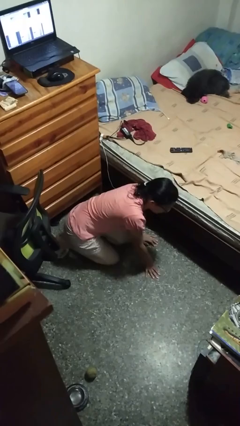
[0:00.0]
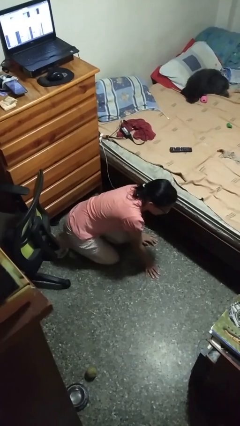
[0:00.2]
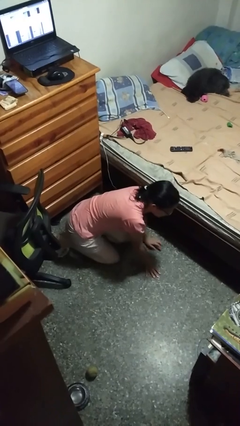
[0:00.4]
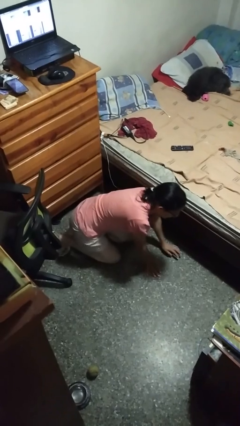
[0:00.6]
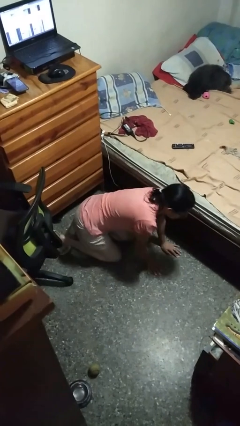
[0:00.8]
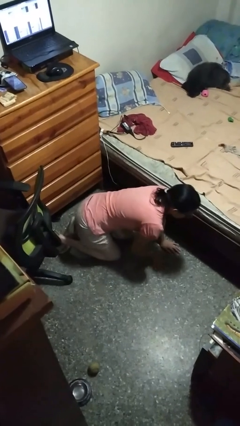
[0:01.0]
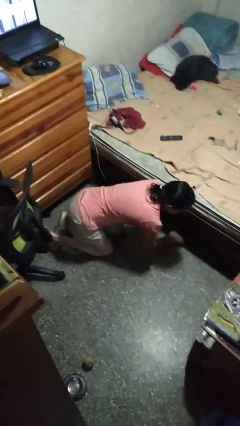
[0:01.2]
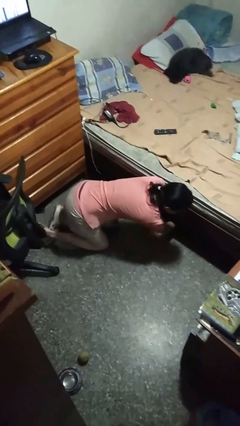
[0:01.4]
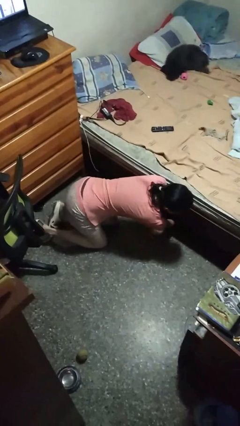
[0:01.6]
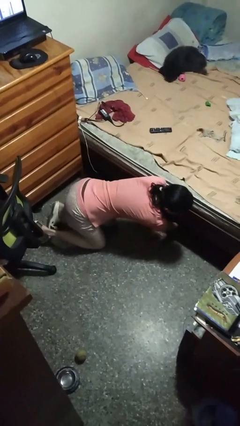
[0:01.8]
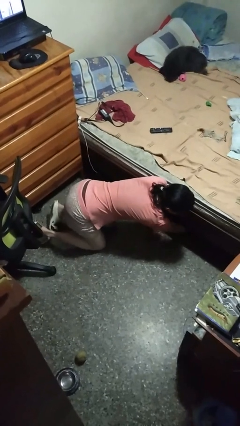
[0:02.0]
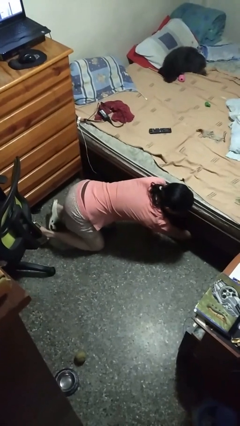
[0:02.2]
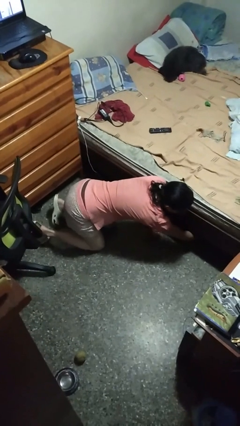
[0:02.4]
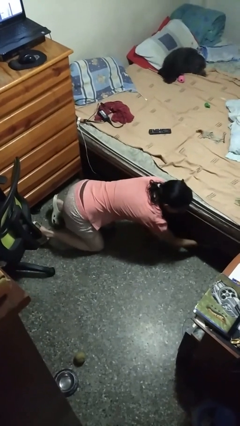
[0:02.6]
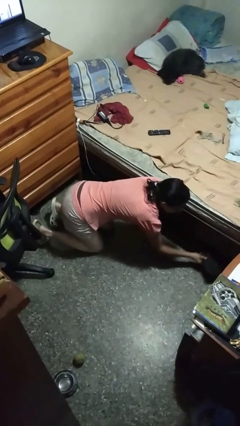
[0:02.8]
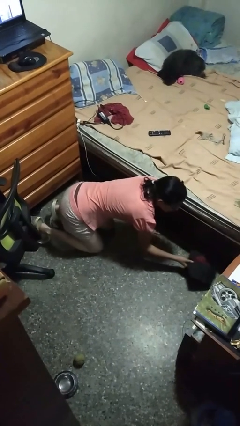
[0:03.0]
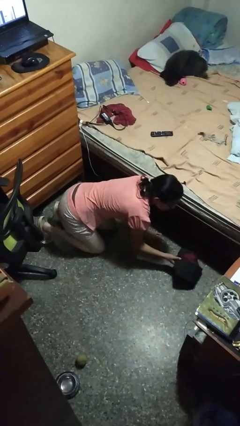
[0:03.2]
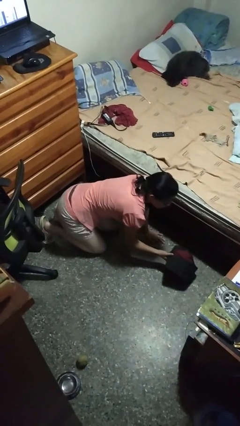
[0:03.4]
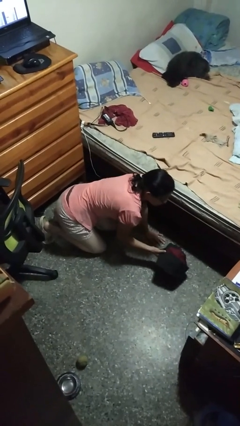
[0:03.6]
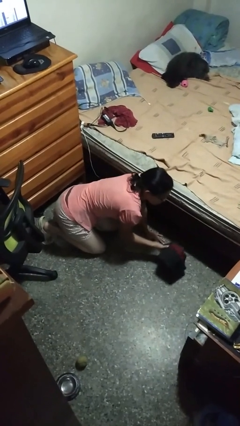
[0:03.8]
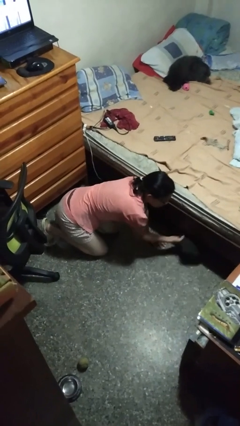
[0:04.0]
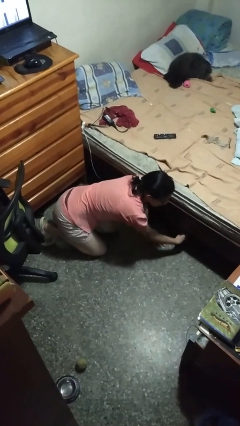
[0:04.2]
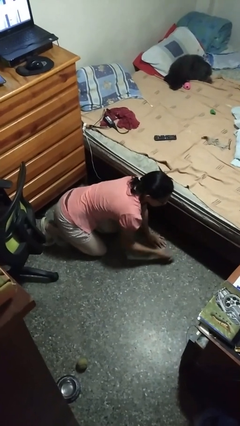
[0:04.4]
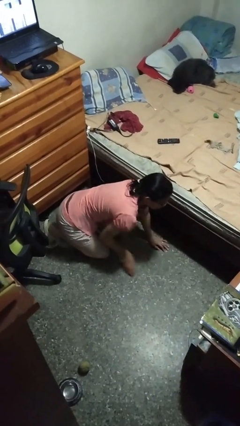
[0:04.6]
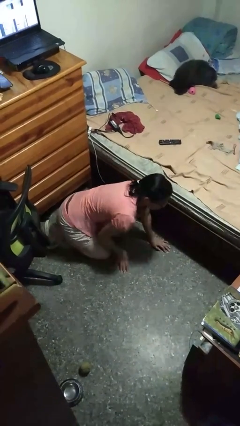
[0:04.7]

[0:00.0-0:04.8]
person searches under bed

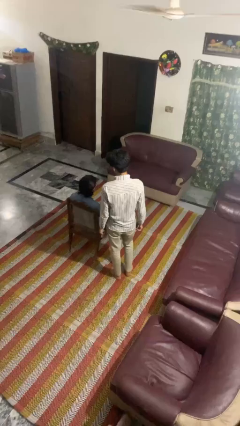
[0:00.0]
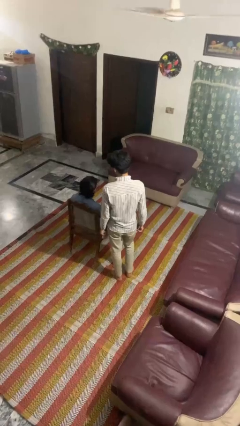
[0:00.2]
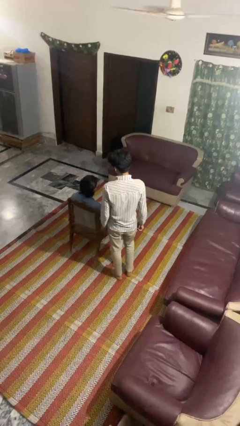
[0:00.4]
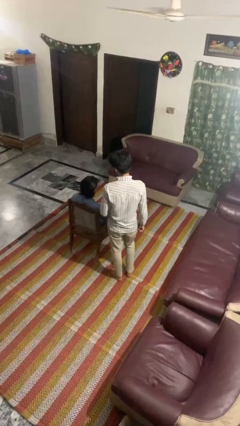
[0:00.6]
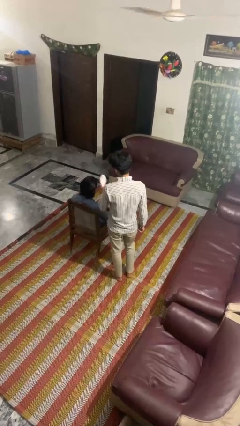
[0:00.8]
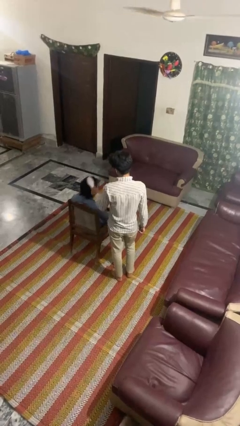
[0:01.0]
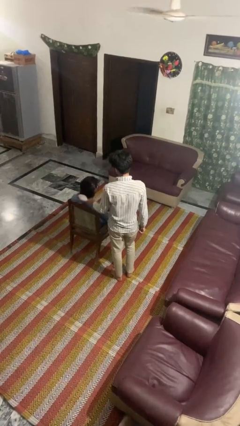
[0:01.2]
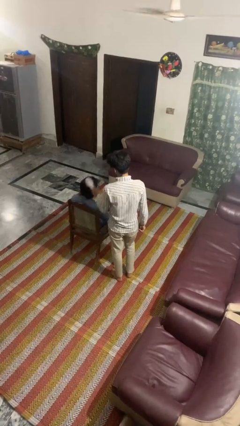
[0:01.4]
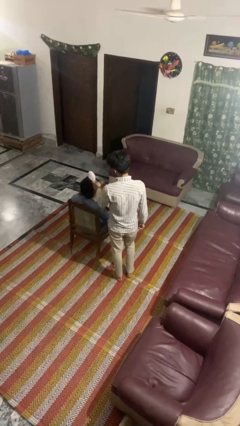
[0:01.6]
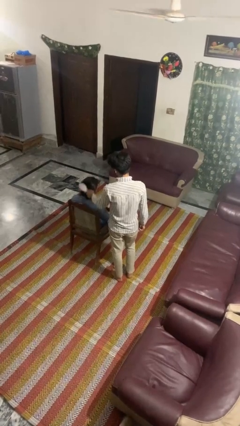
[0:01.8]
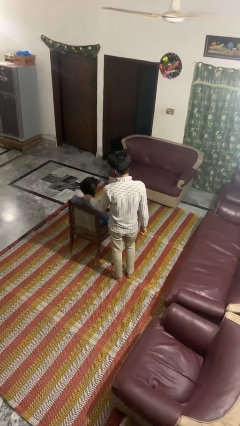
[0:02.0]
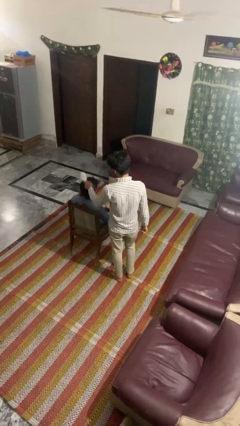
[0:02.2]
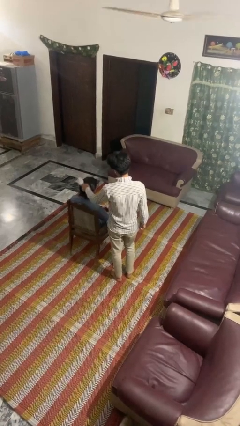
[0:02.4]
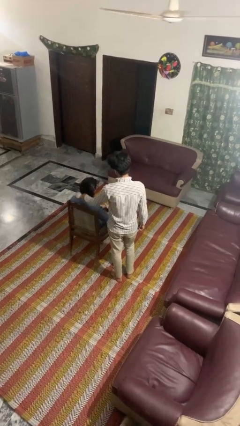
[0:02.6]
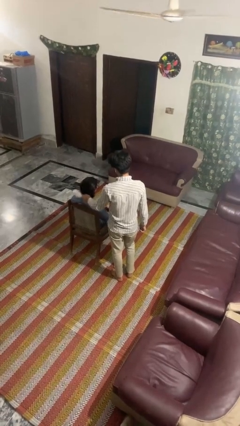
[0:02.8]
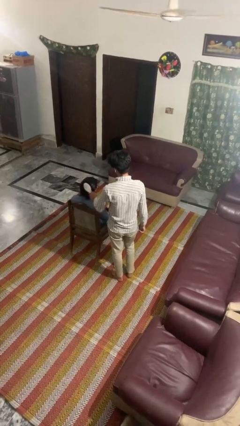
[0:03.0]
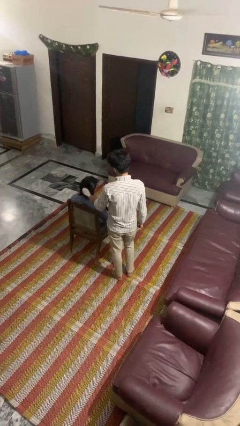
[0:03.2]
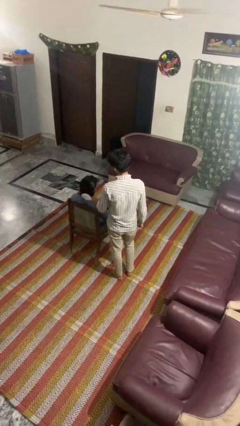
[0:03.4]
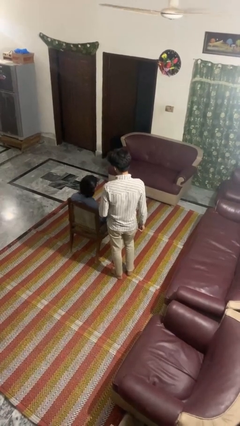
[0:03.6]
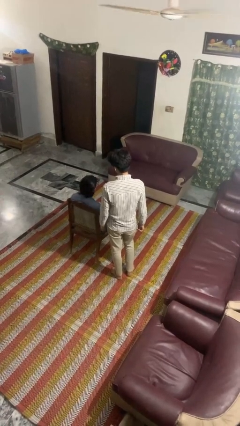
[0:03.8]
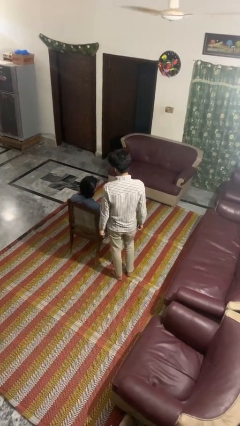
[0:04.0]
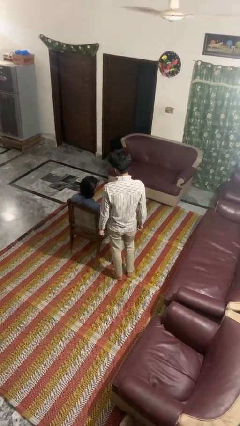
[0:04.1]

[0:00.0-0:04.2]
person brushes hair of person

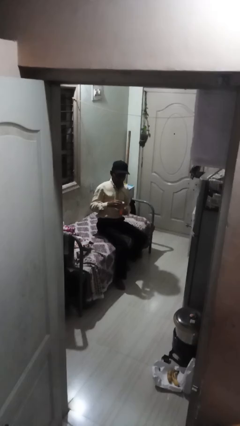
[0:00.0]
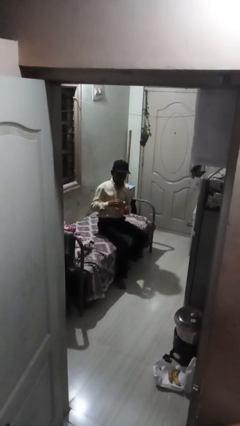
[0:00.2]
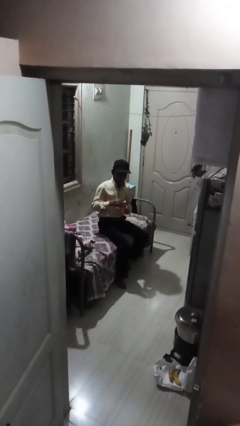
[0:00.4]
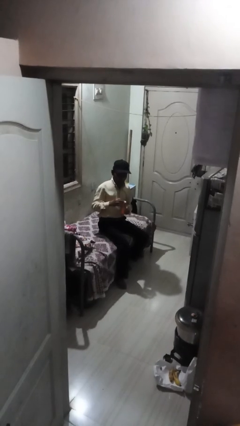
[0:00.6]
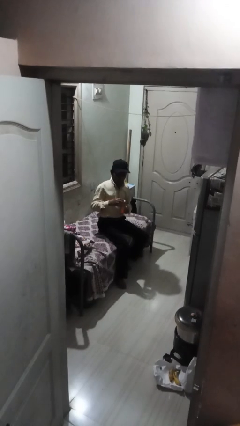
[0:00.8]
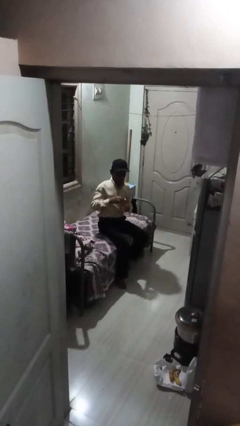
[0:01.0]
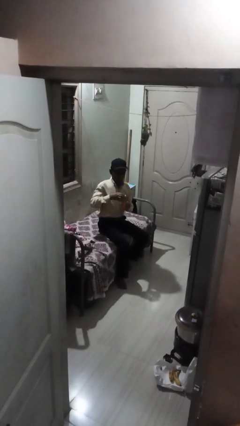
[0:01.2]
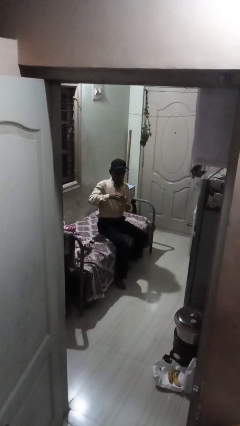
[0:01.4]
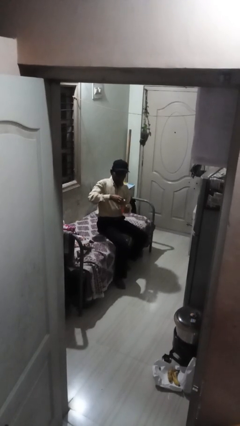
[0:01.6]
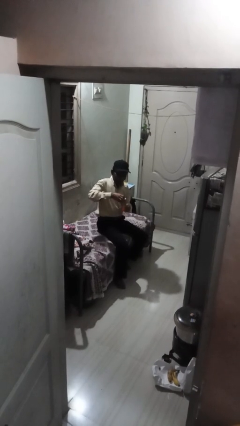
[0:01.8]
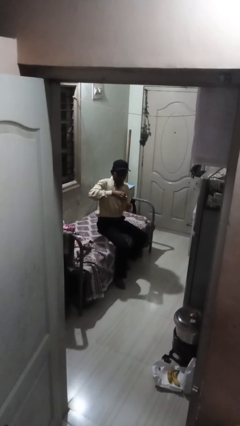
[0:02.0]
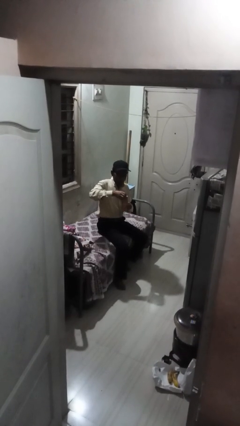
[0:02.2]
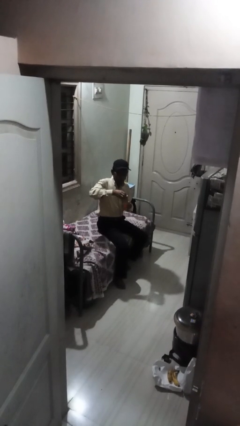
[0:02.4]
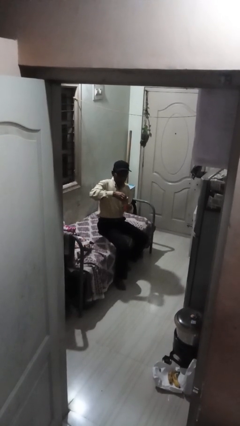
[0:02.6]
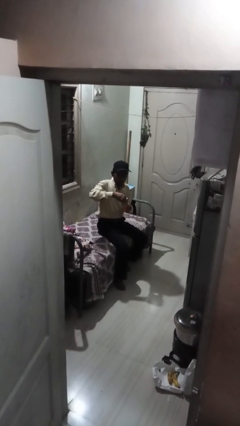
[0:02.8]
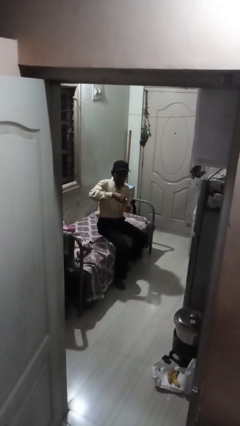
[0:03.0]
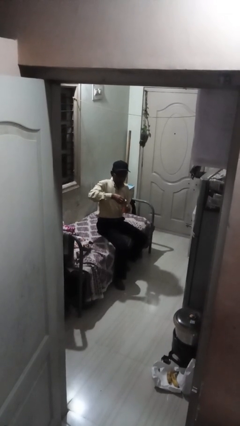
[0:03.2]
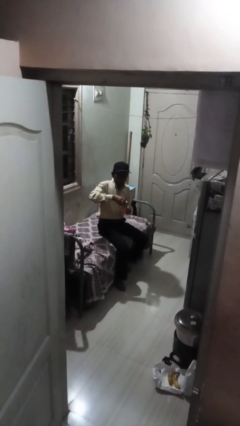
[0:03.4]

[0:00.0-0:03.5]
person opens beverage can

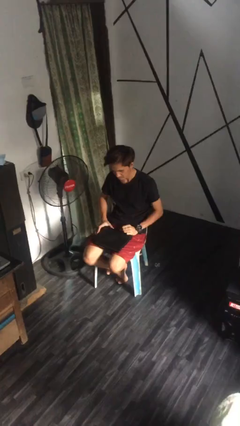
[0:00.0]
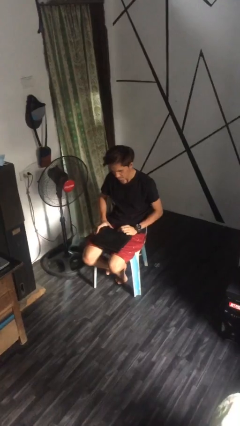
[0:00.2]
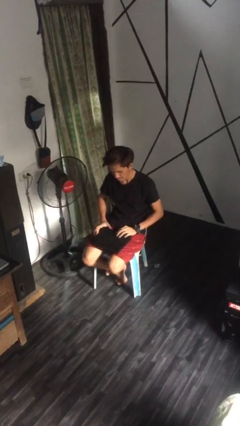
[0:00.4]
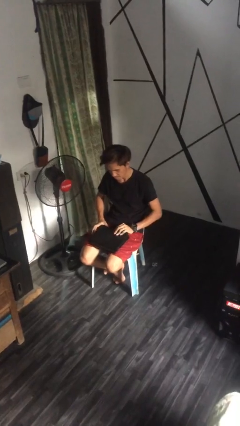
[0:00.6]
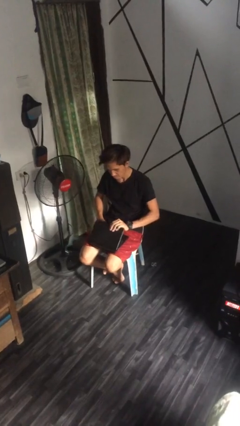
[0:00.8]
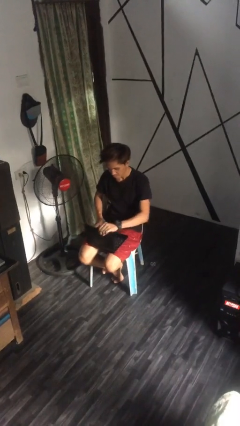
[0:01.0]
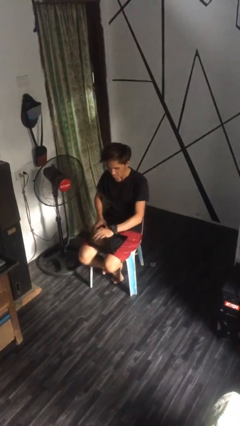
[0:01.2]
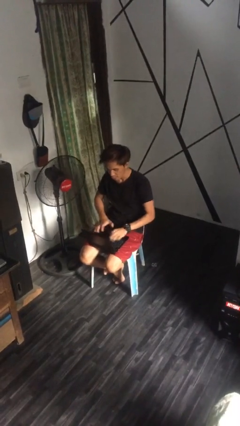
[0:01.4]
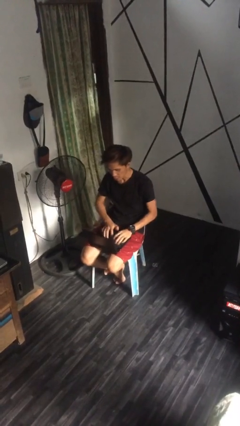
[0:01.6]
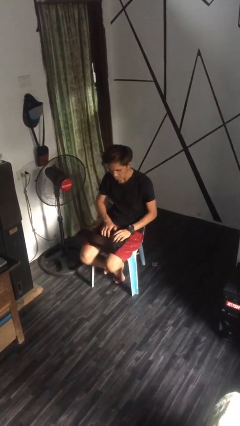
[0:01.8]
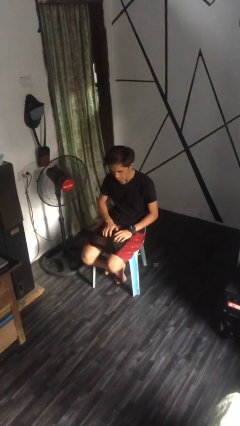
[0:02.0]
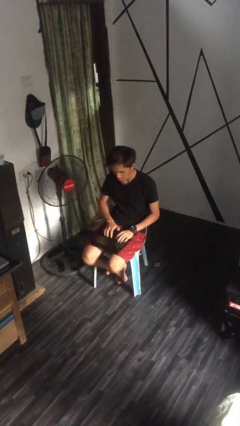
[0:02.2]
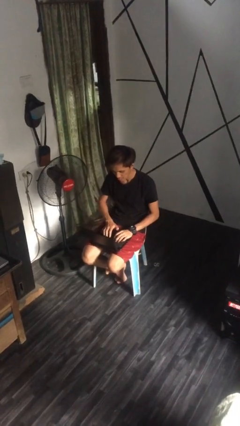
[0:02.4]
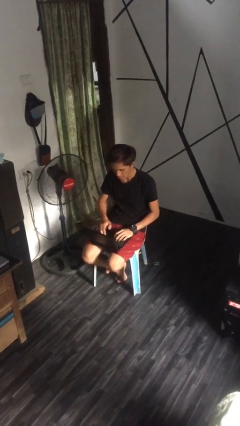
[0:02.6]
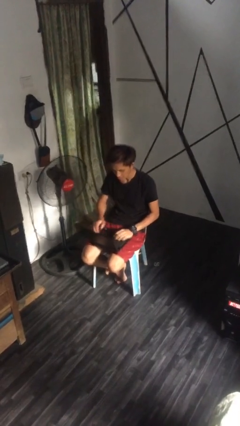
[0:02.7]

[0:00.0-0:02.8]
person interacts with laptop

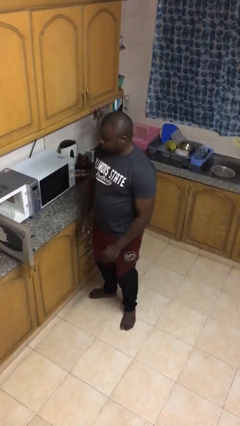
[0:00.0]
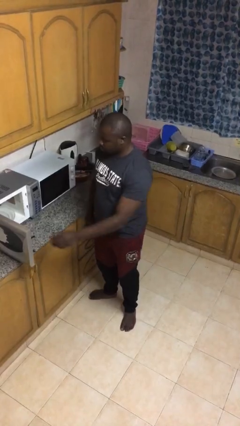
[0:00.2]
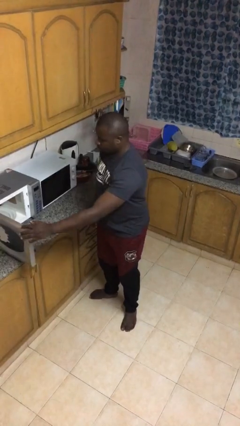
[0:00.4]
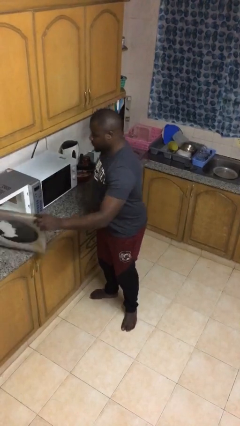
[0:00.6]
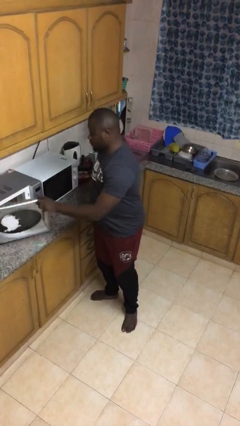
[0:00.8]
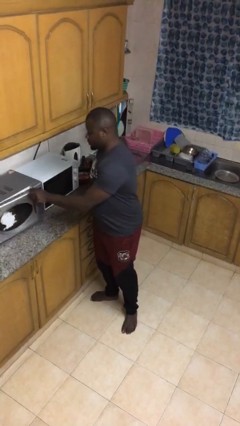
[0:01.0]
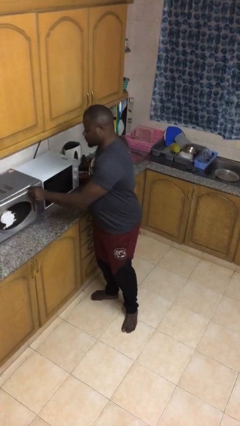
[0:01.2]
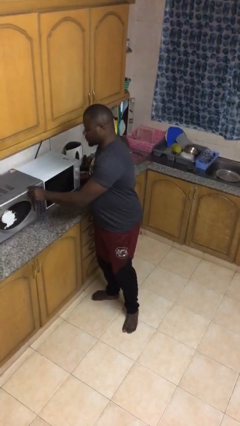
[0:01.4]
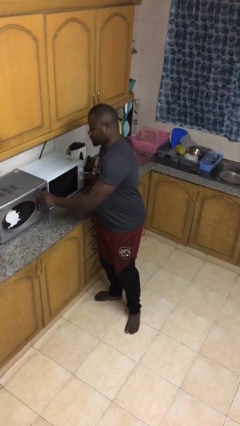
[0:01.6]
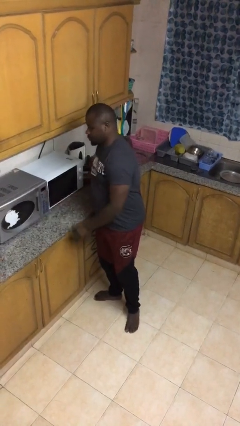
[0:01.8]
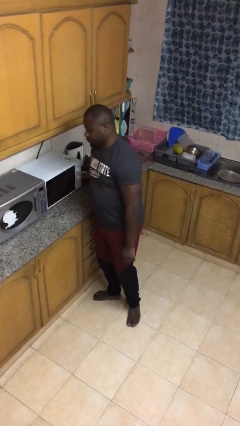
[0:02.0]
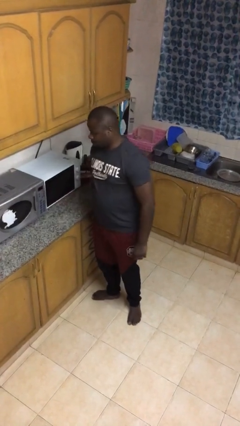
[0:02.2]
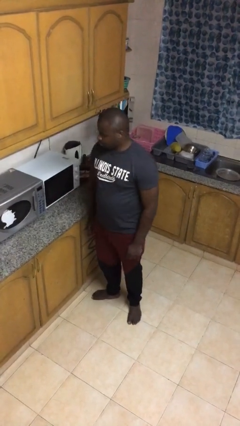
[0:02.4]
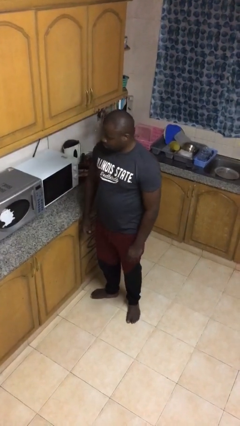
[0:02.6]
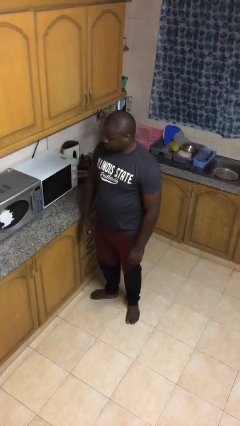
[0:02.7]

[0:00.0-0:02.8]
person closes microwave

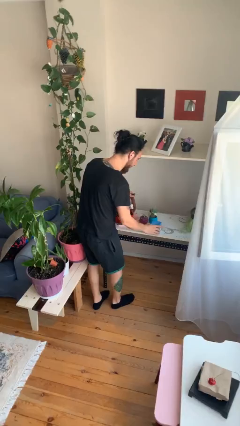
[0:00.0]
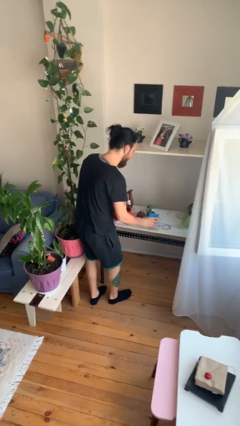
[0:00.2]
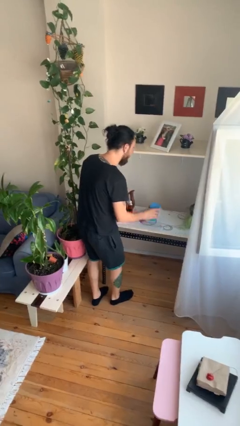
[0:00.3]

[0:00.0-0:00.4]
person picks up object from table
